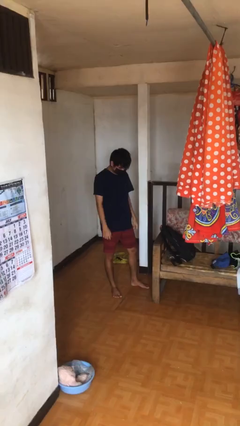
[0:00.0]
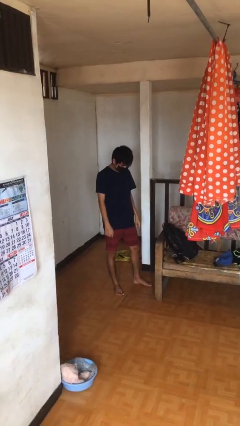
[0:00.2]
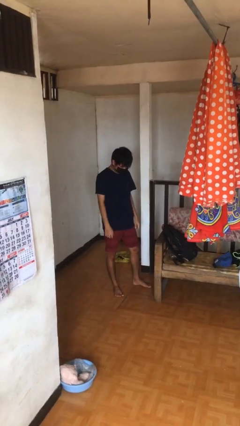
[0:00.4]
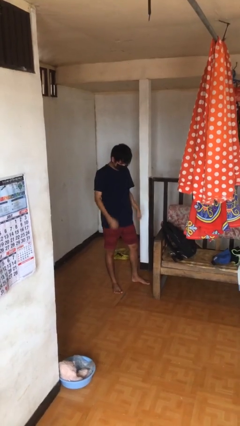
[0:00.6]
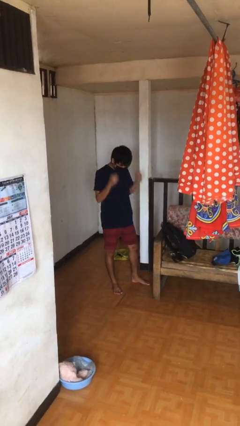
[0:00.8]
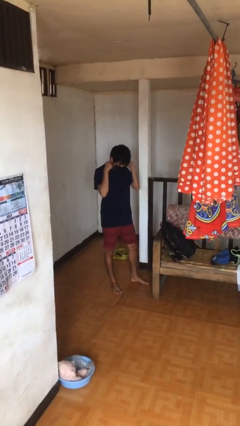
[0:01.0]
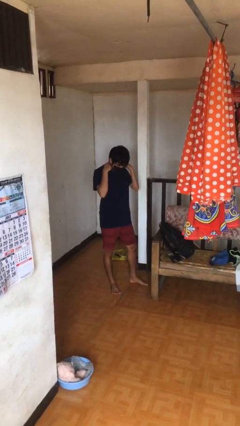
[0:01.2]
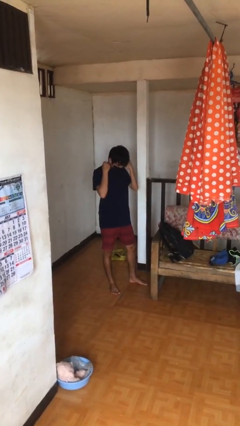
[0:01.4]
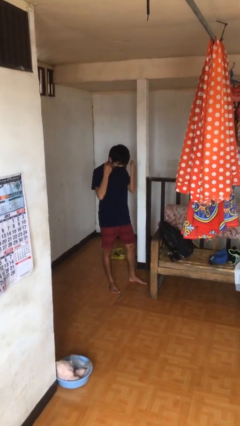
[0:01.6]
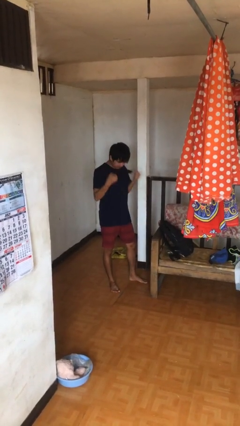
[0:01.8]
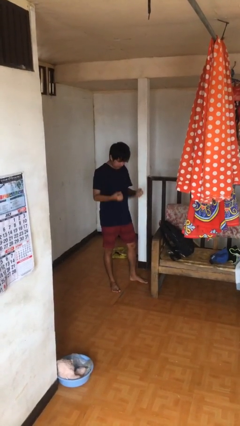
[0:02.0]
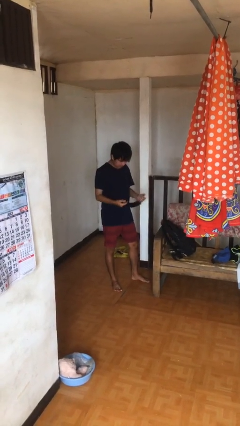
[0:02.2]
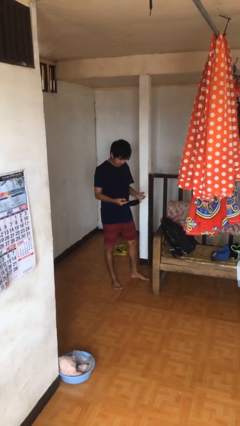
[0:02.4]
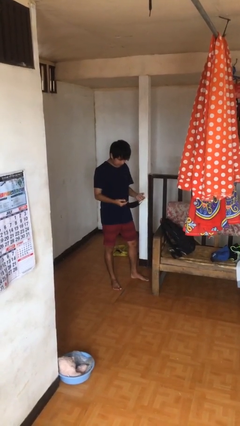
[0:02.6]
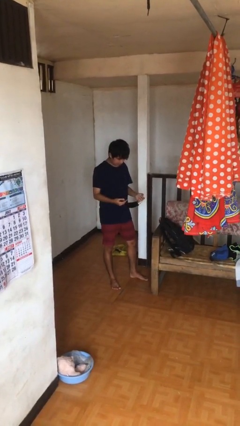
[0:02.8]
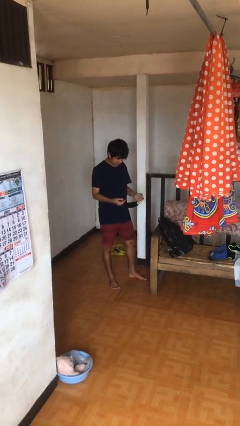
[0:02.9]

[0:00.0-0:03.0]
person takes off facemask

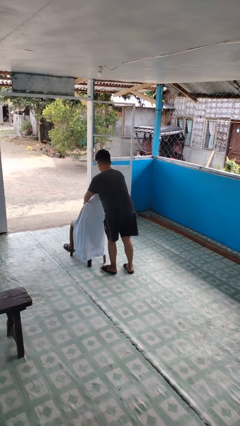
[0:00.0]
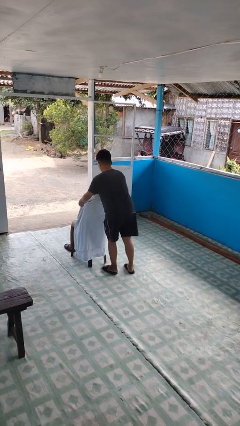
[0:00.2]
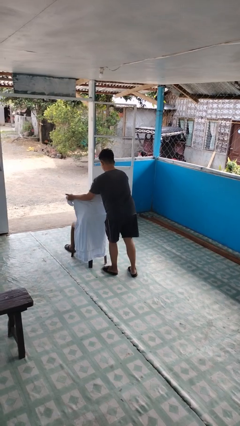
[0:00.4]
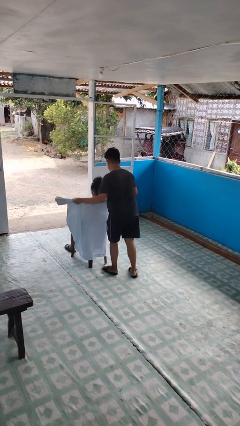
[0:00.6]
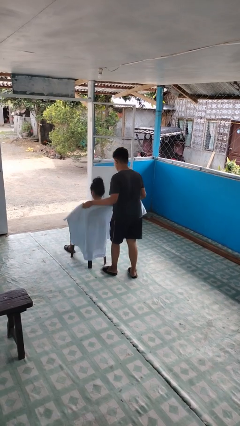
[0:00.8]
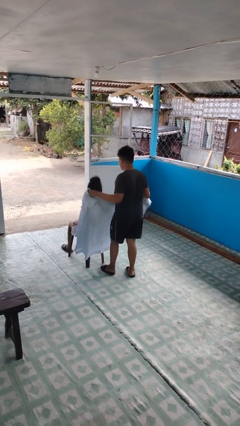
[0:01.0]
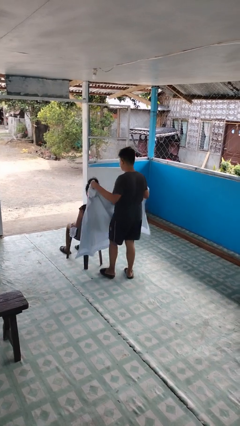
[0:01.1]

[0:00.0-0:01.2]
person uncovers friend with blanket

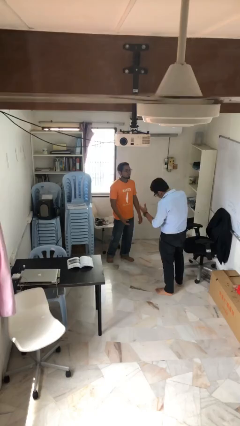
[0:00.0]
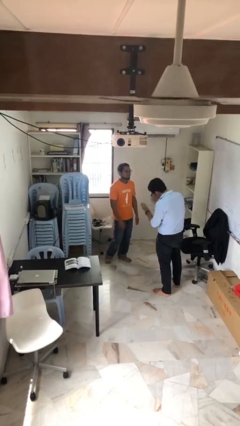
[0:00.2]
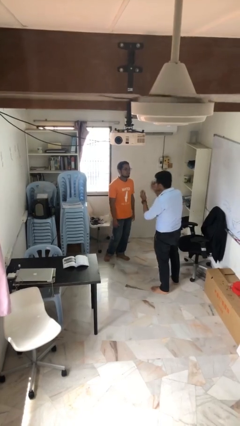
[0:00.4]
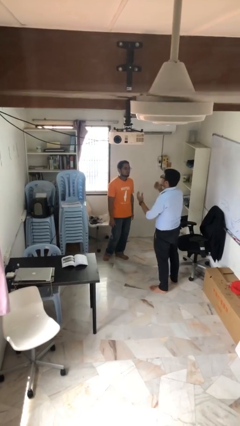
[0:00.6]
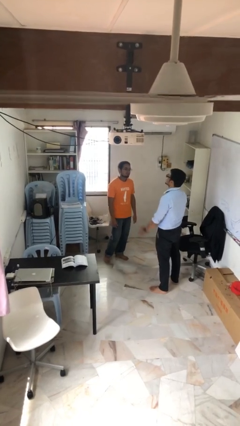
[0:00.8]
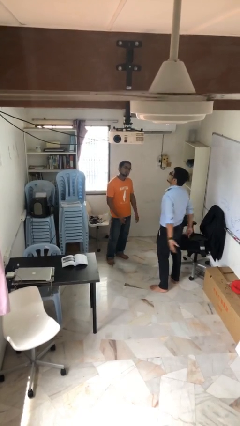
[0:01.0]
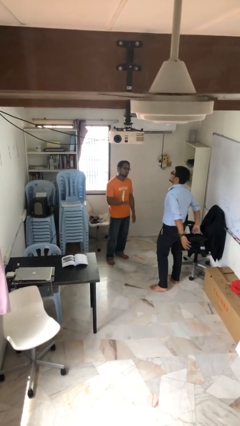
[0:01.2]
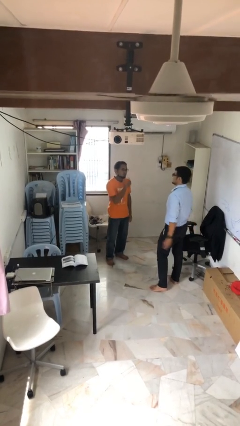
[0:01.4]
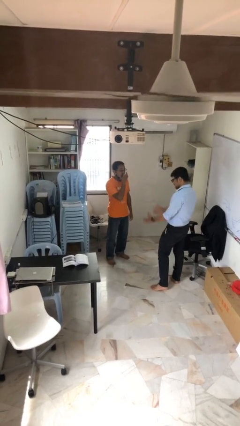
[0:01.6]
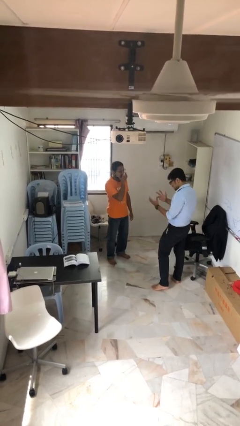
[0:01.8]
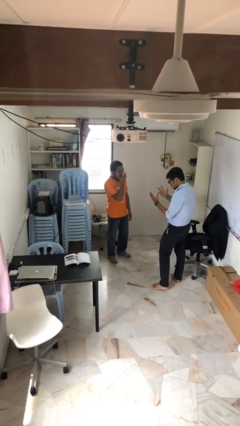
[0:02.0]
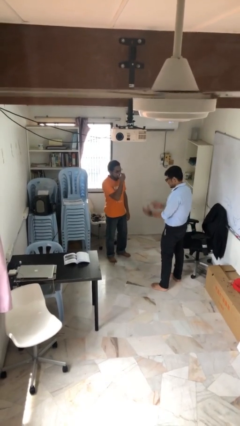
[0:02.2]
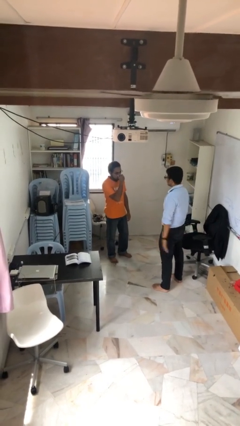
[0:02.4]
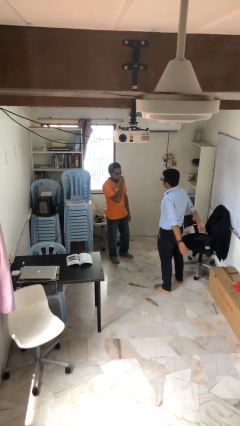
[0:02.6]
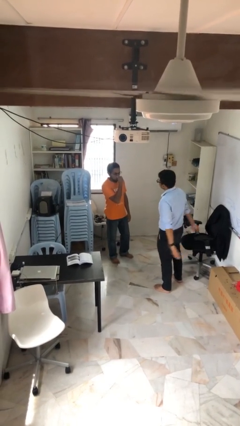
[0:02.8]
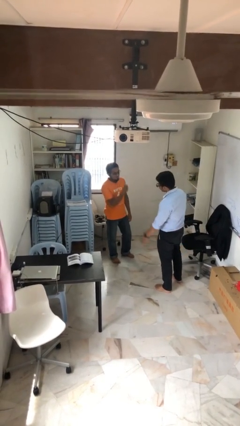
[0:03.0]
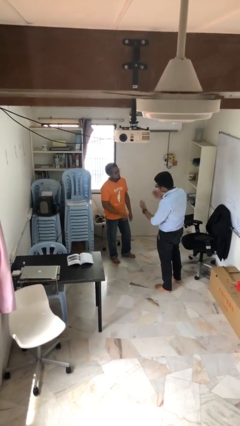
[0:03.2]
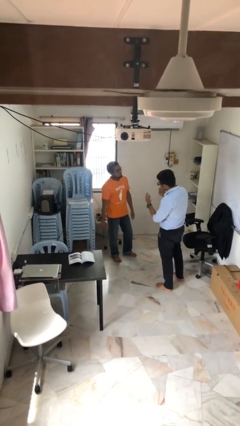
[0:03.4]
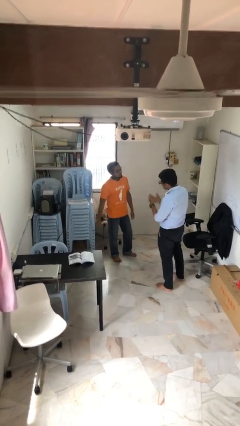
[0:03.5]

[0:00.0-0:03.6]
person talks to person

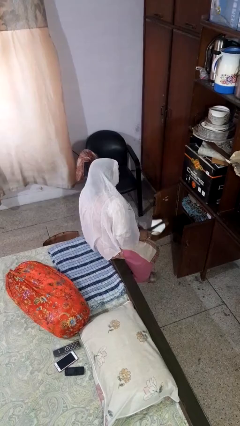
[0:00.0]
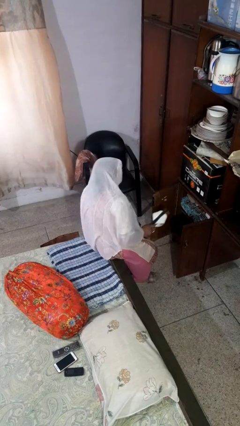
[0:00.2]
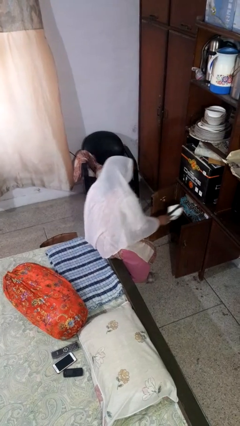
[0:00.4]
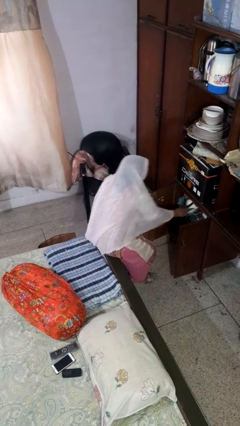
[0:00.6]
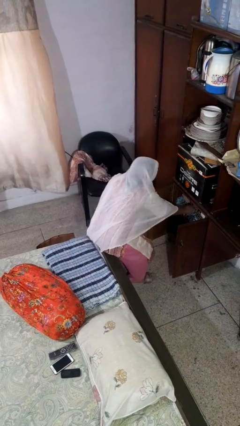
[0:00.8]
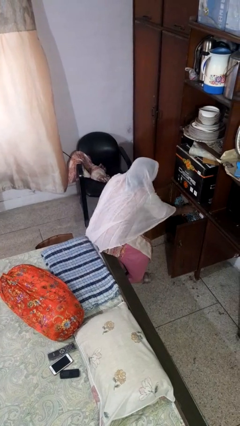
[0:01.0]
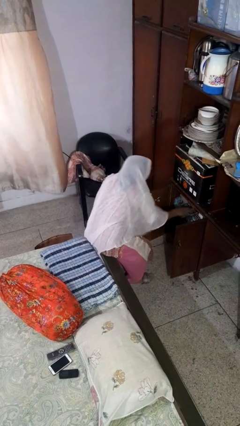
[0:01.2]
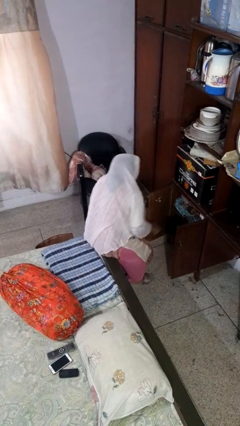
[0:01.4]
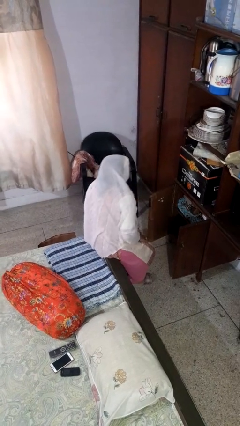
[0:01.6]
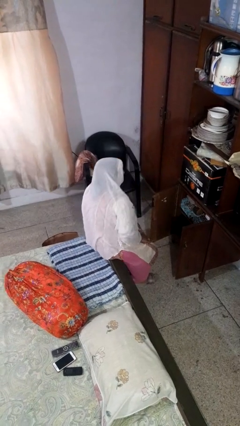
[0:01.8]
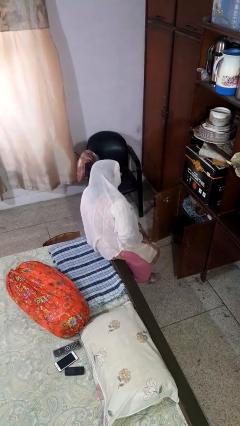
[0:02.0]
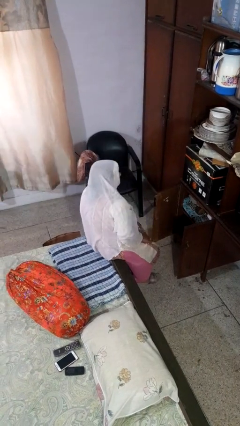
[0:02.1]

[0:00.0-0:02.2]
person puts object in cabinet

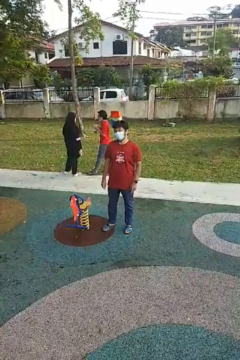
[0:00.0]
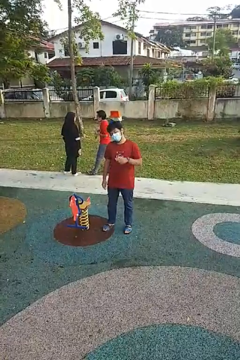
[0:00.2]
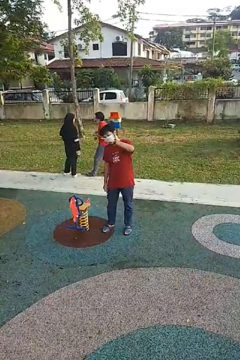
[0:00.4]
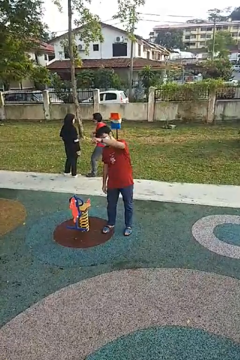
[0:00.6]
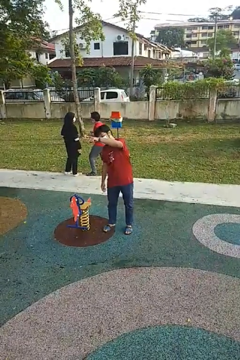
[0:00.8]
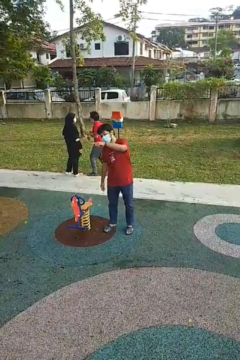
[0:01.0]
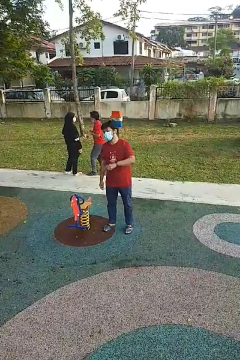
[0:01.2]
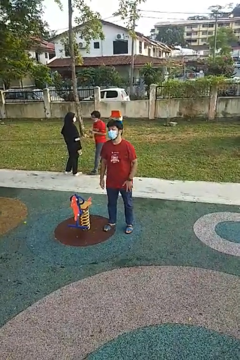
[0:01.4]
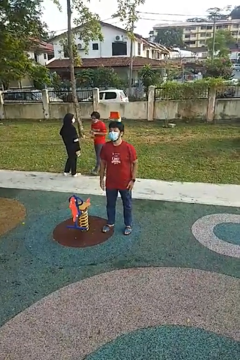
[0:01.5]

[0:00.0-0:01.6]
person points at person

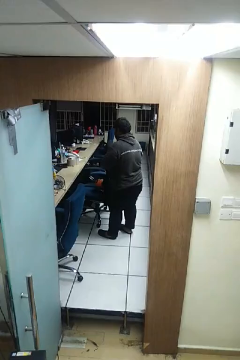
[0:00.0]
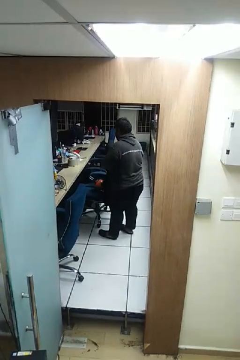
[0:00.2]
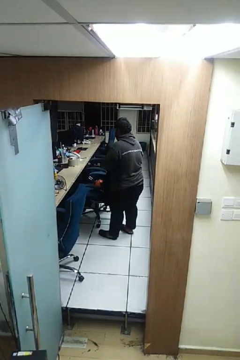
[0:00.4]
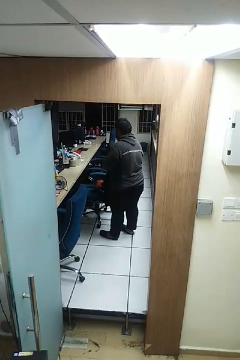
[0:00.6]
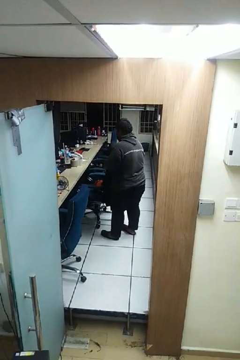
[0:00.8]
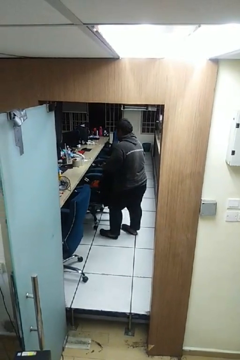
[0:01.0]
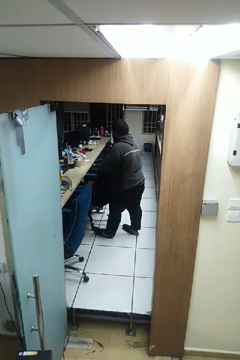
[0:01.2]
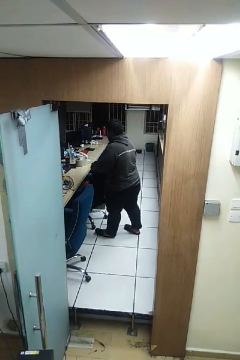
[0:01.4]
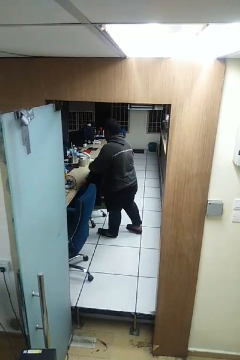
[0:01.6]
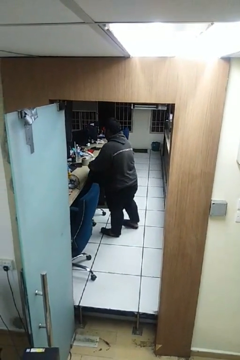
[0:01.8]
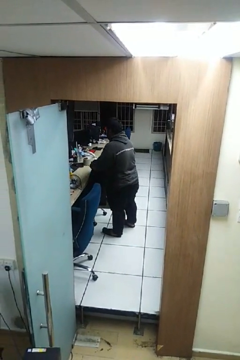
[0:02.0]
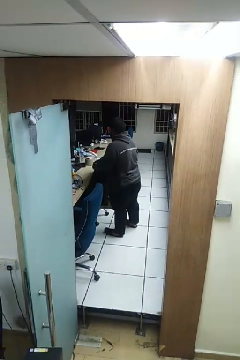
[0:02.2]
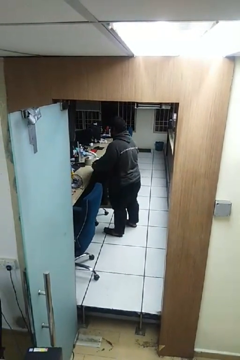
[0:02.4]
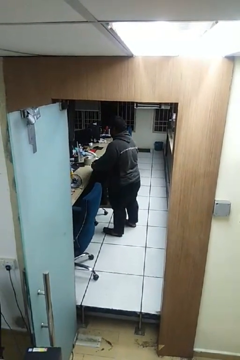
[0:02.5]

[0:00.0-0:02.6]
person pushes in chair

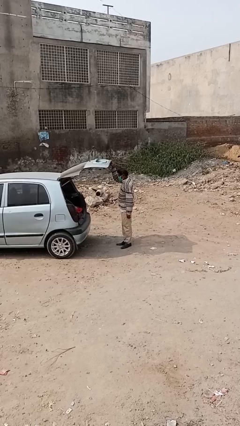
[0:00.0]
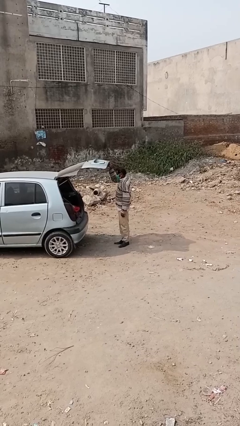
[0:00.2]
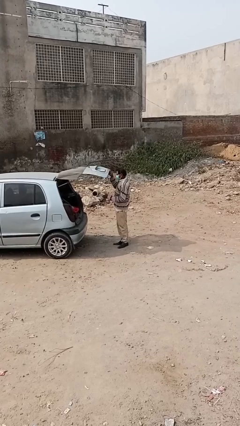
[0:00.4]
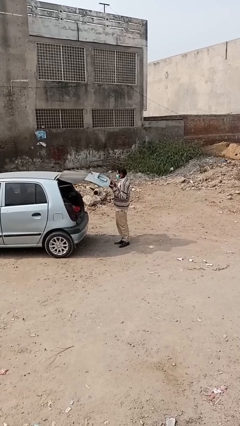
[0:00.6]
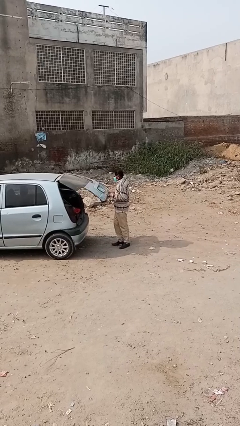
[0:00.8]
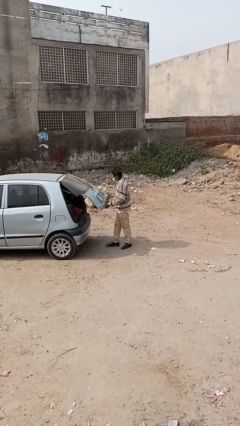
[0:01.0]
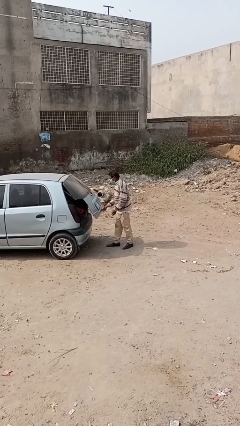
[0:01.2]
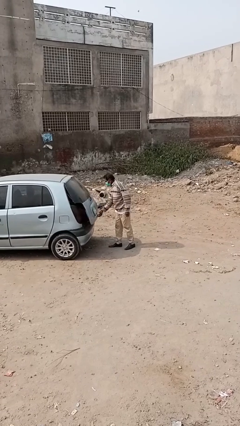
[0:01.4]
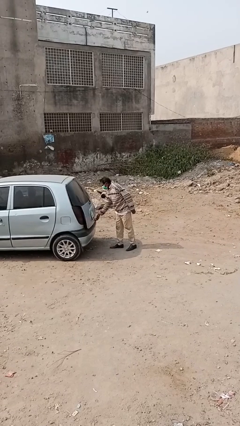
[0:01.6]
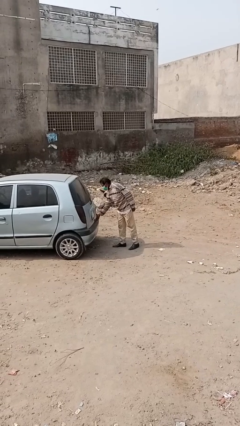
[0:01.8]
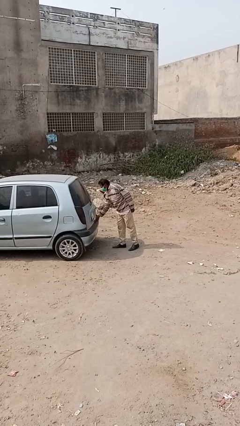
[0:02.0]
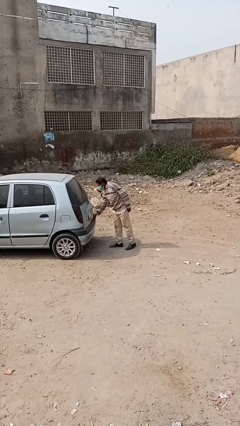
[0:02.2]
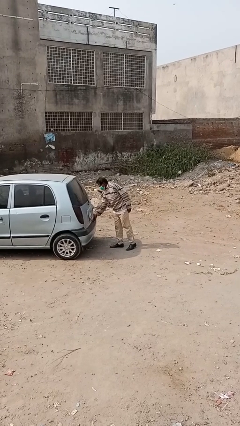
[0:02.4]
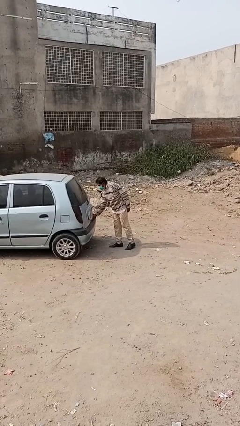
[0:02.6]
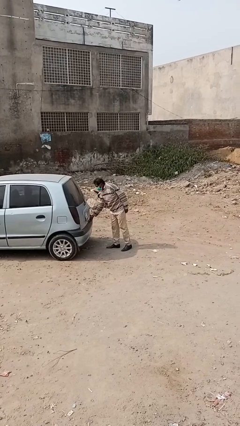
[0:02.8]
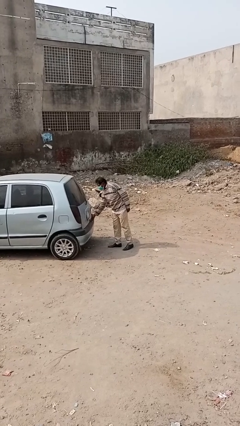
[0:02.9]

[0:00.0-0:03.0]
person closes car trunk

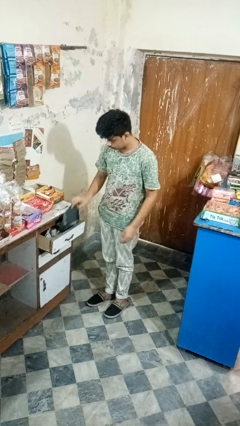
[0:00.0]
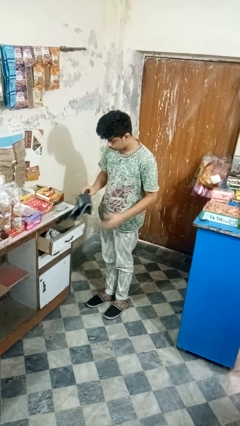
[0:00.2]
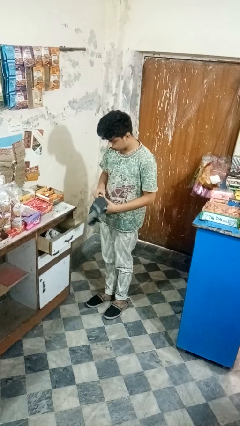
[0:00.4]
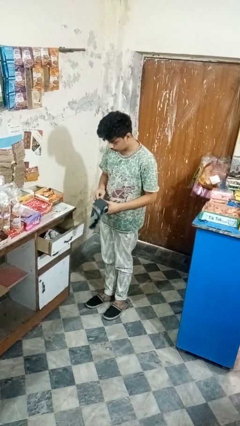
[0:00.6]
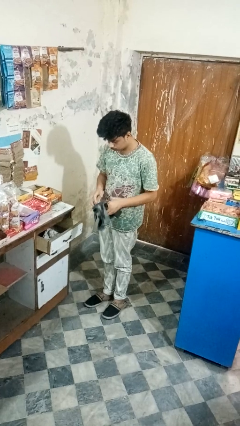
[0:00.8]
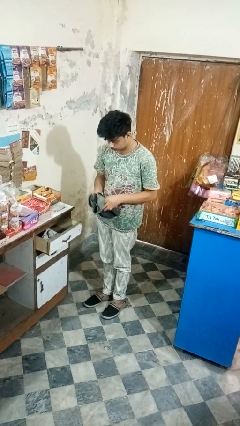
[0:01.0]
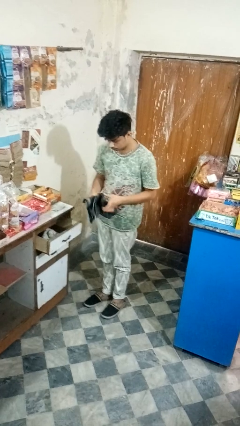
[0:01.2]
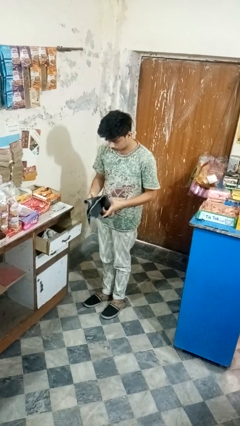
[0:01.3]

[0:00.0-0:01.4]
person takes clothes from dresser
